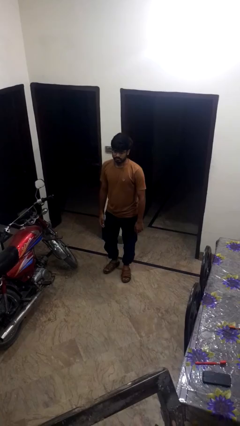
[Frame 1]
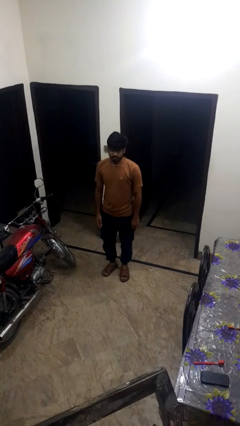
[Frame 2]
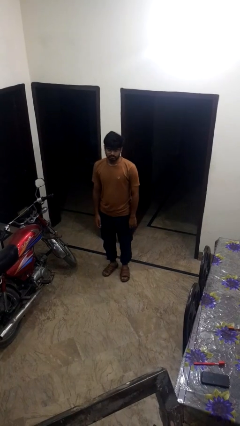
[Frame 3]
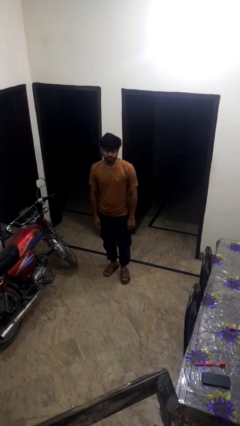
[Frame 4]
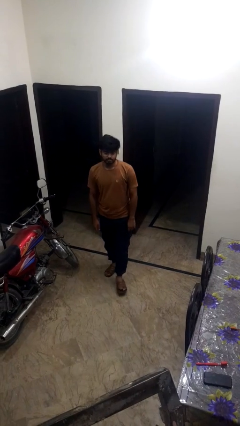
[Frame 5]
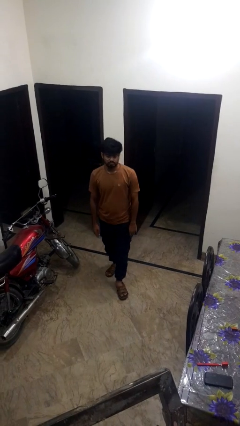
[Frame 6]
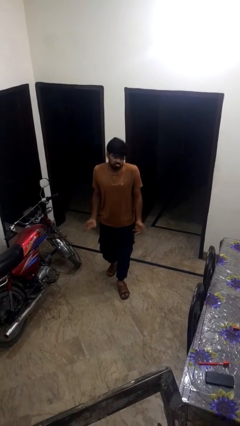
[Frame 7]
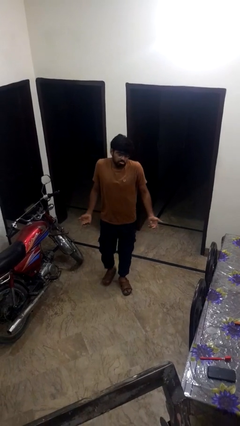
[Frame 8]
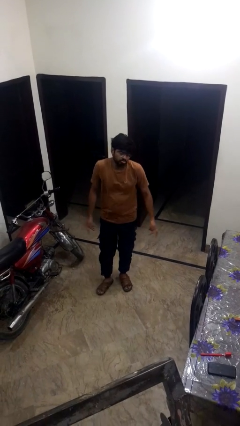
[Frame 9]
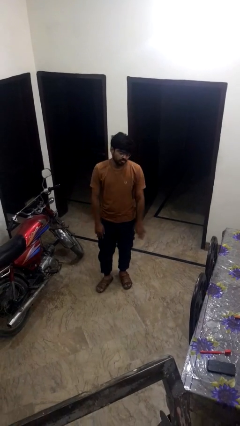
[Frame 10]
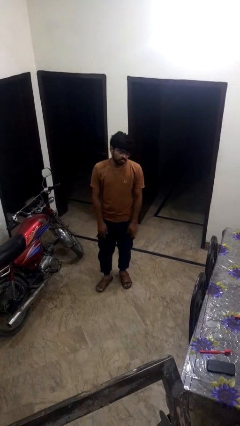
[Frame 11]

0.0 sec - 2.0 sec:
person shrugs

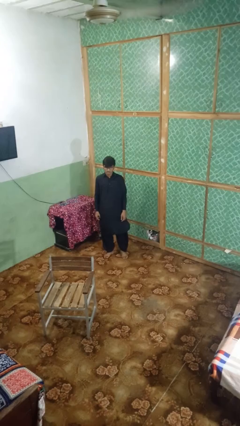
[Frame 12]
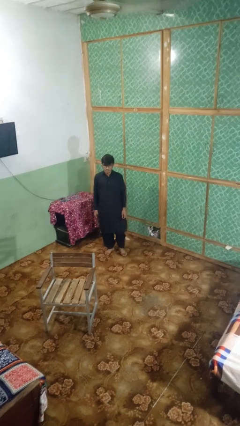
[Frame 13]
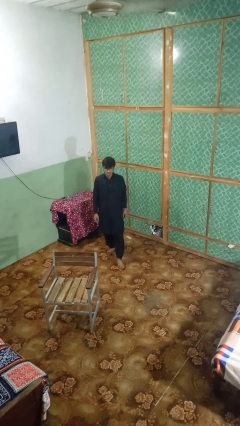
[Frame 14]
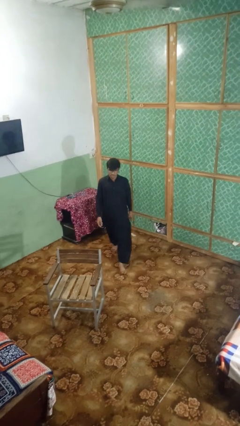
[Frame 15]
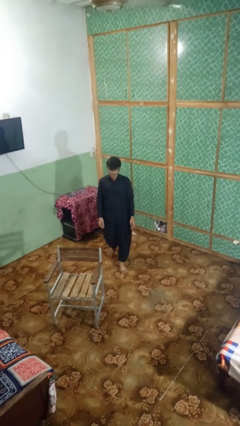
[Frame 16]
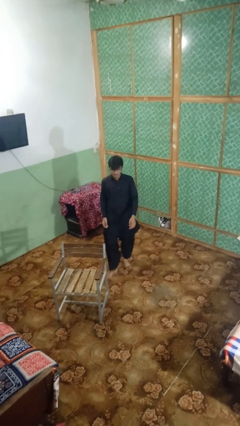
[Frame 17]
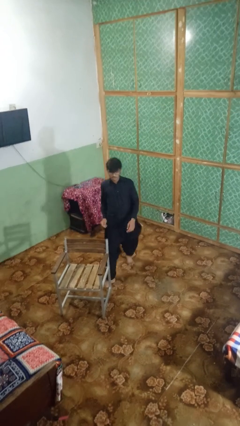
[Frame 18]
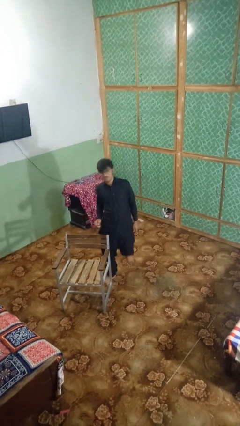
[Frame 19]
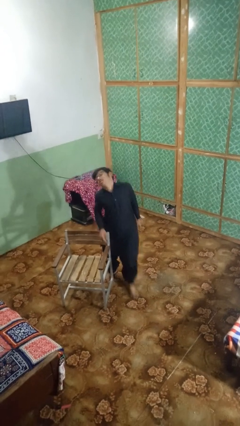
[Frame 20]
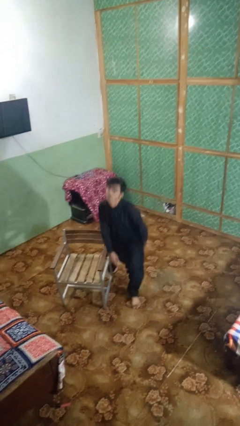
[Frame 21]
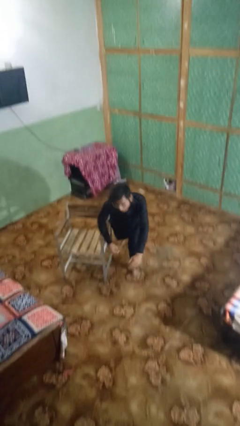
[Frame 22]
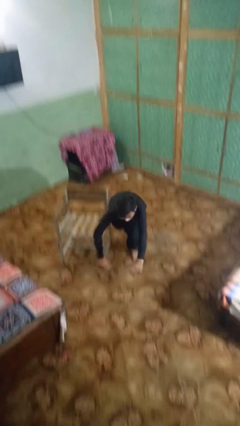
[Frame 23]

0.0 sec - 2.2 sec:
person trips on object on floor

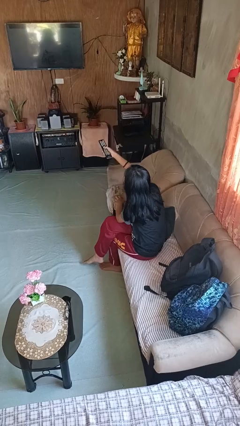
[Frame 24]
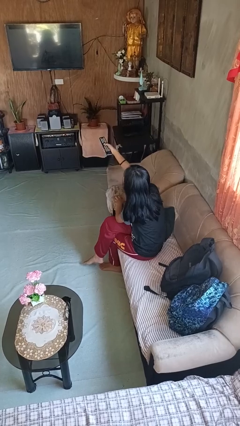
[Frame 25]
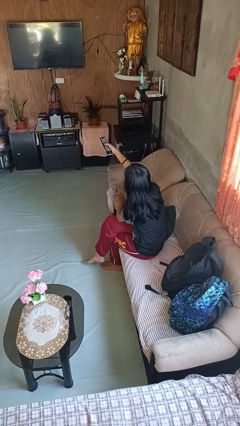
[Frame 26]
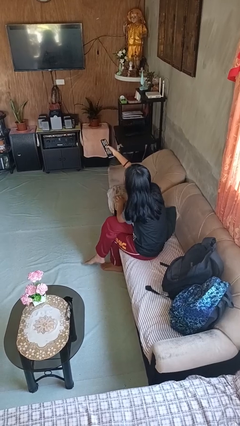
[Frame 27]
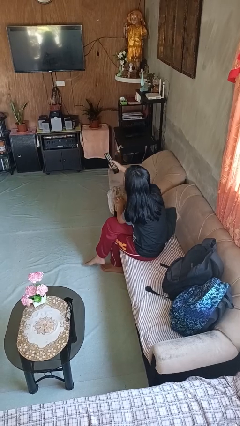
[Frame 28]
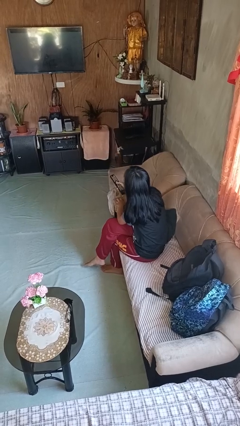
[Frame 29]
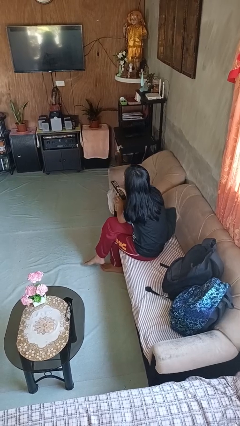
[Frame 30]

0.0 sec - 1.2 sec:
person uses television remote

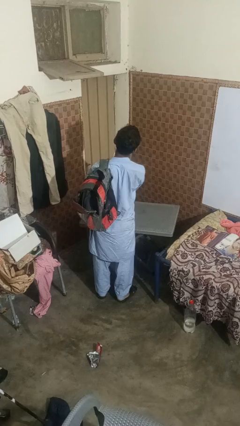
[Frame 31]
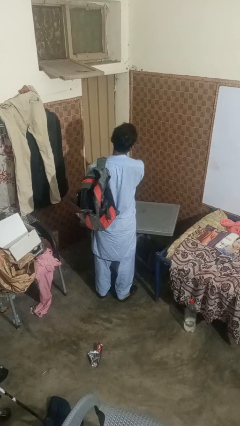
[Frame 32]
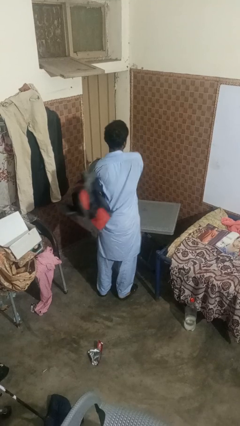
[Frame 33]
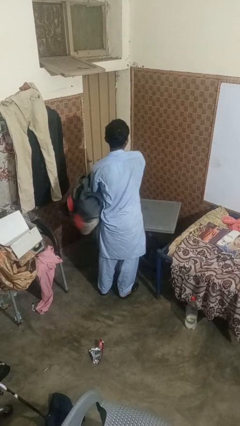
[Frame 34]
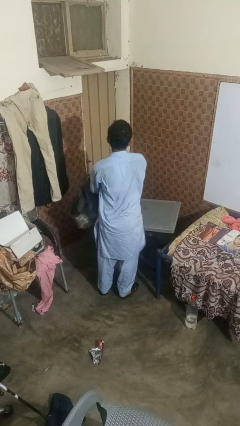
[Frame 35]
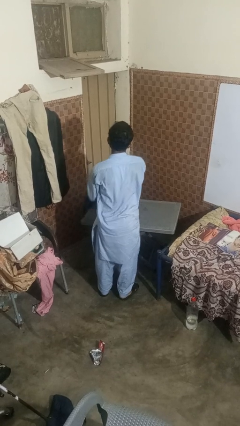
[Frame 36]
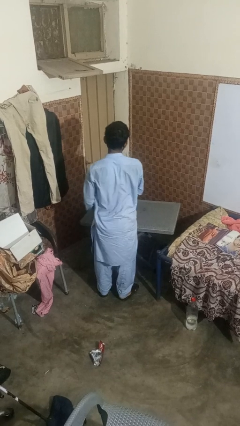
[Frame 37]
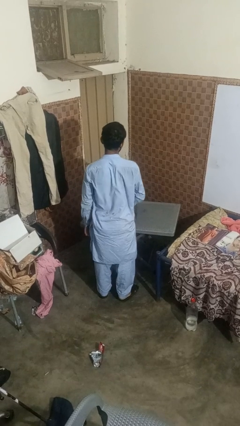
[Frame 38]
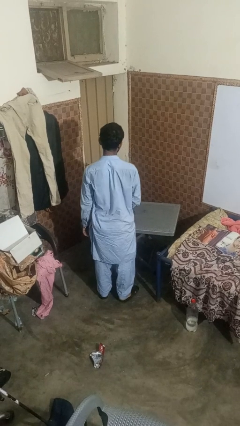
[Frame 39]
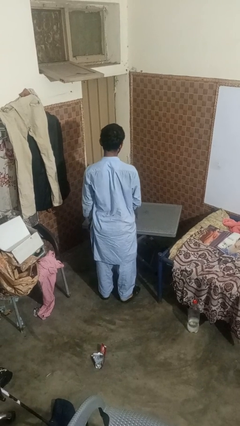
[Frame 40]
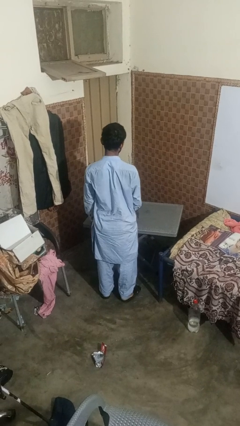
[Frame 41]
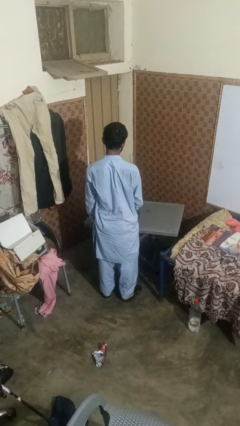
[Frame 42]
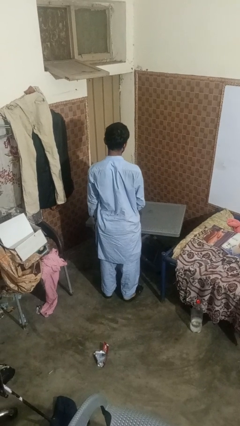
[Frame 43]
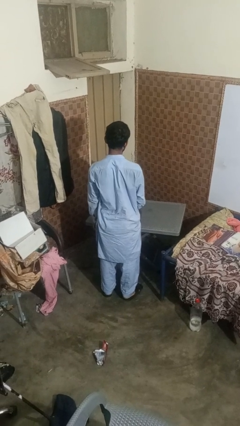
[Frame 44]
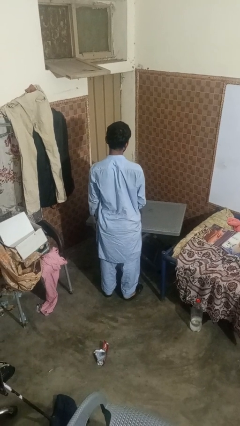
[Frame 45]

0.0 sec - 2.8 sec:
person takes off backpack

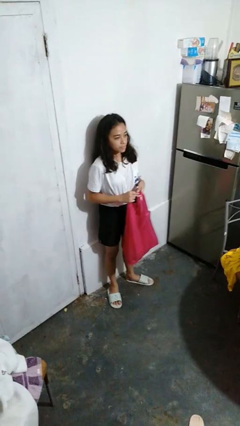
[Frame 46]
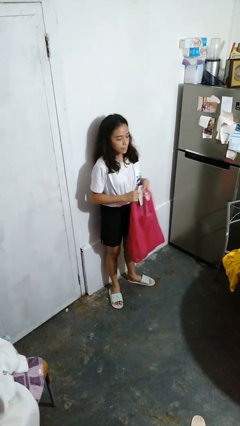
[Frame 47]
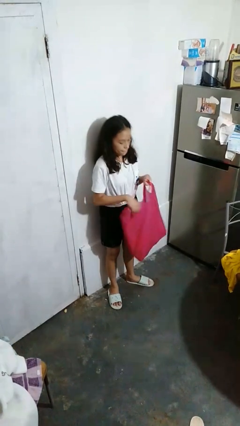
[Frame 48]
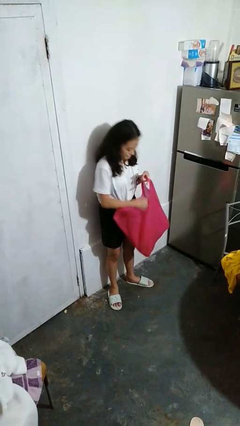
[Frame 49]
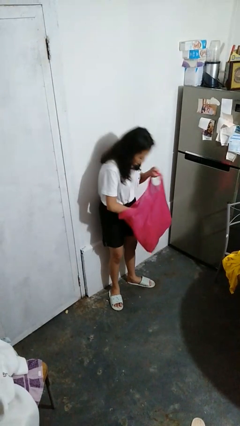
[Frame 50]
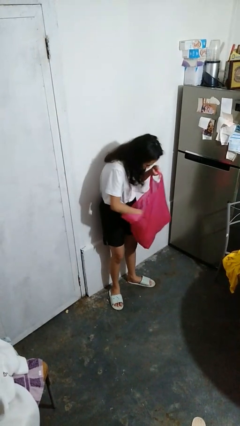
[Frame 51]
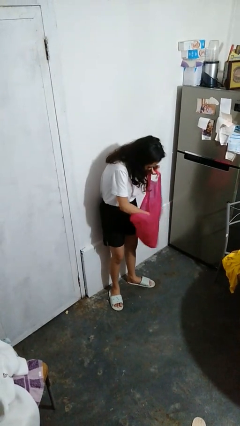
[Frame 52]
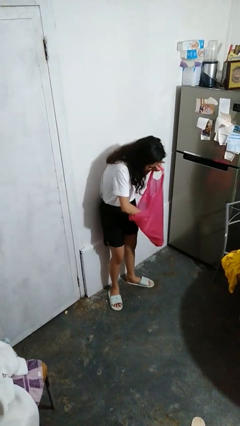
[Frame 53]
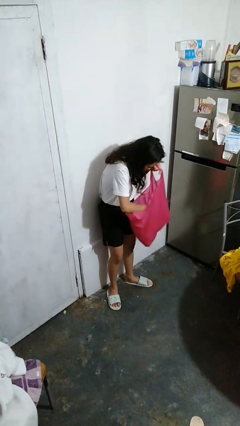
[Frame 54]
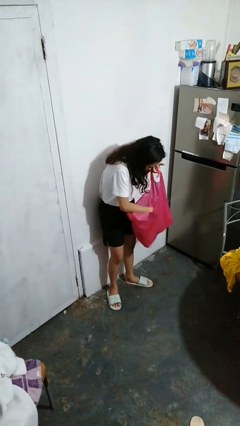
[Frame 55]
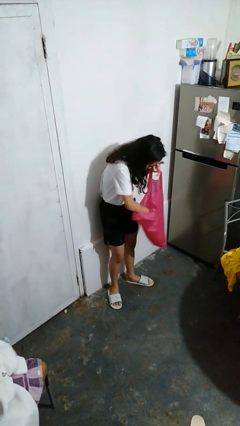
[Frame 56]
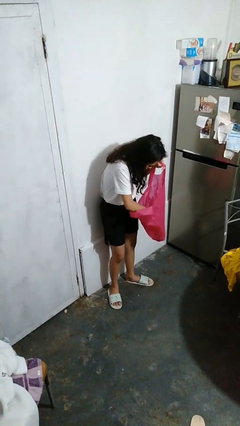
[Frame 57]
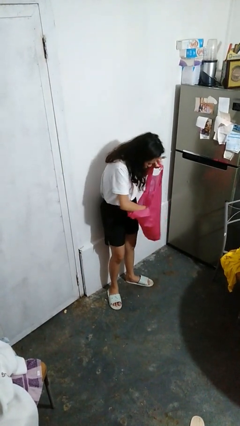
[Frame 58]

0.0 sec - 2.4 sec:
person searches in bag

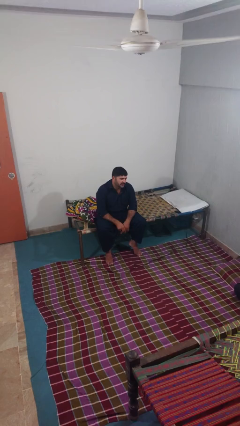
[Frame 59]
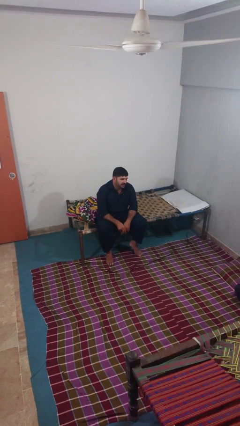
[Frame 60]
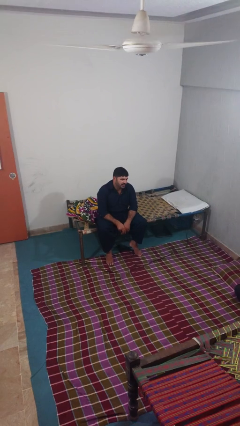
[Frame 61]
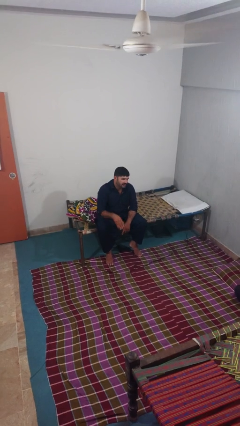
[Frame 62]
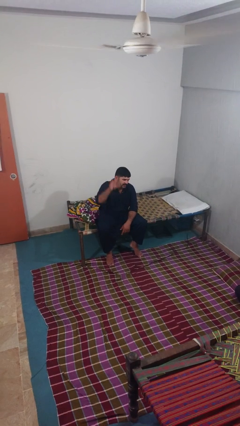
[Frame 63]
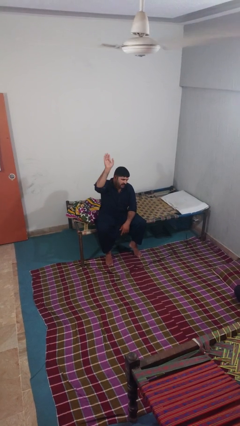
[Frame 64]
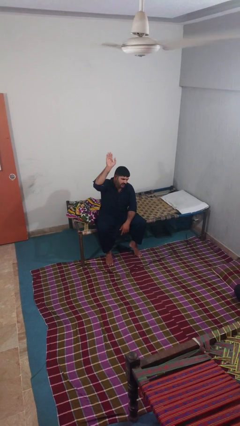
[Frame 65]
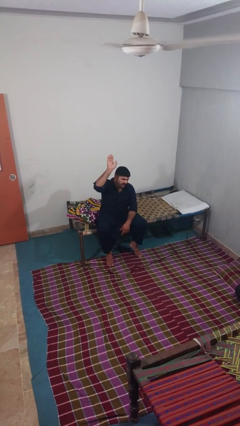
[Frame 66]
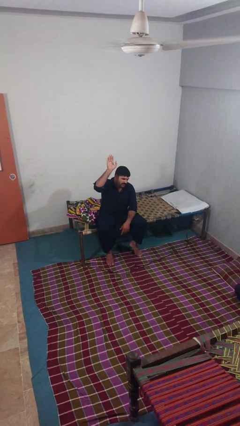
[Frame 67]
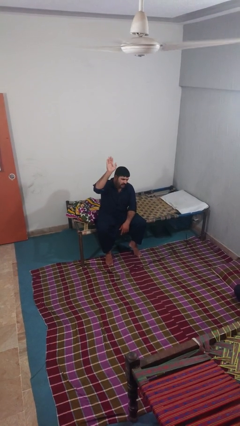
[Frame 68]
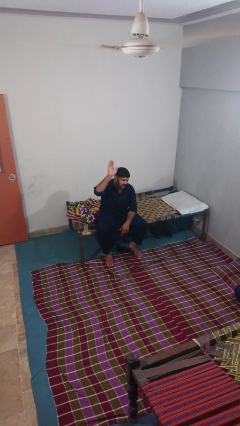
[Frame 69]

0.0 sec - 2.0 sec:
person gestures swipe up

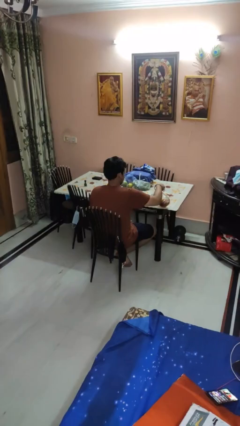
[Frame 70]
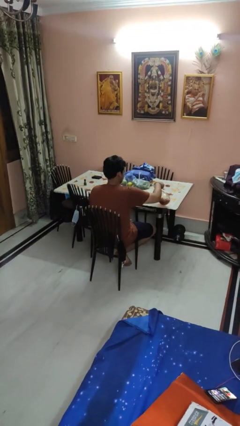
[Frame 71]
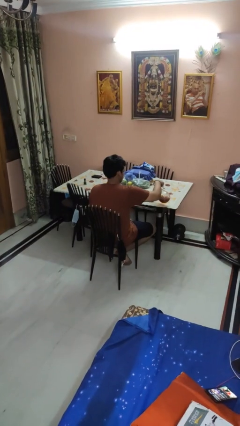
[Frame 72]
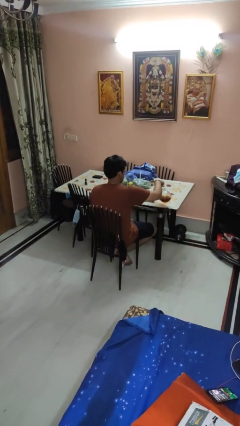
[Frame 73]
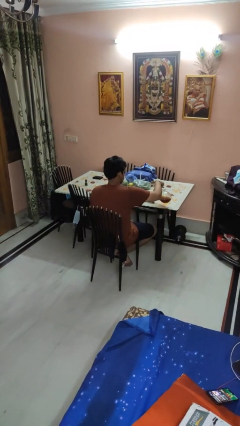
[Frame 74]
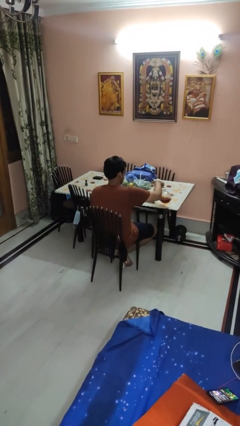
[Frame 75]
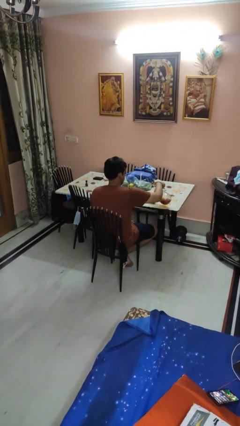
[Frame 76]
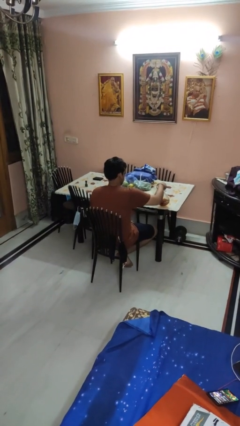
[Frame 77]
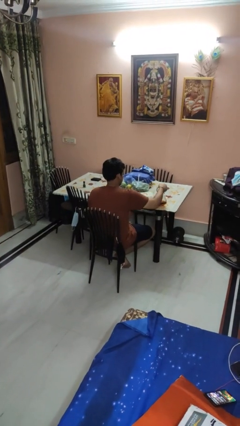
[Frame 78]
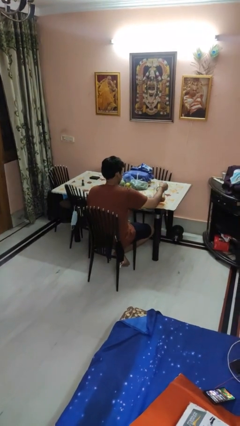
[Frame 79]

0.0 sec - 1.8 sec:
person pours coffee into mug

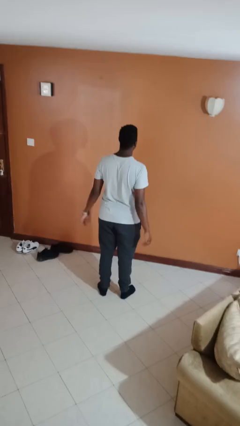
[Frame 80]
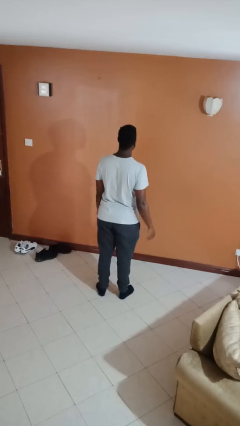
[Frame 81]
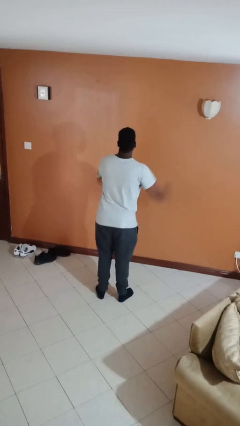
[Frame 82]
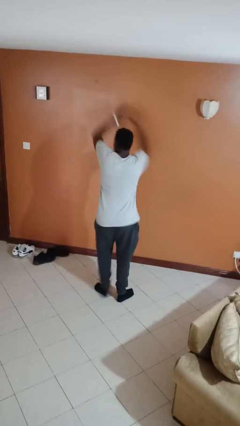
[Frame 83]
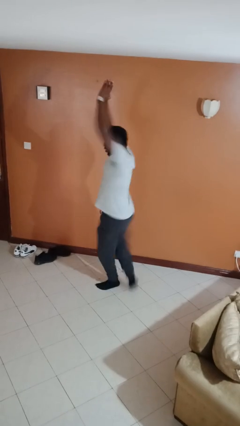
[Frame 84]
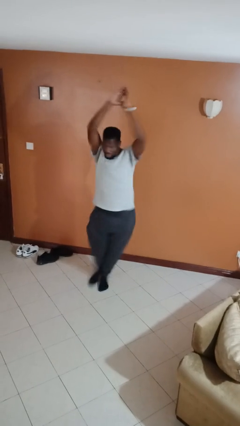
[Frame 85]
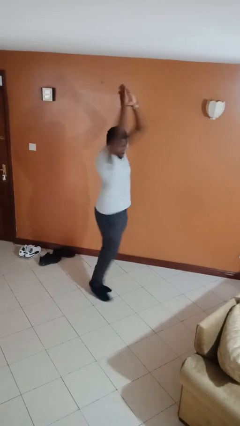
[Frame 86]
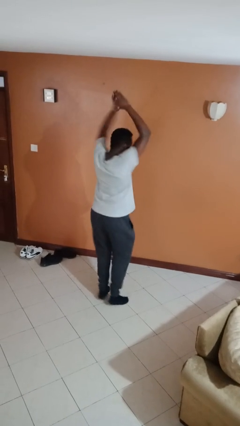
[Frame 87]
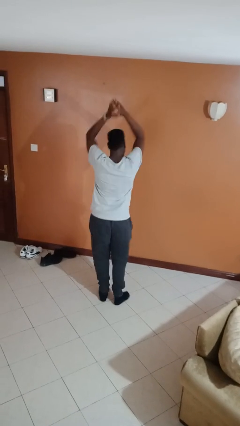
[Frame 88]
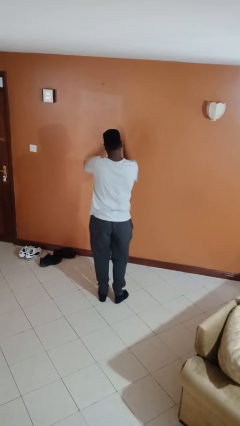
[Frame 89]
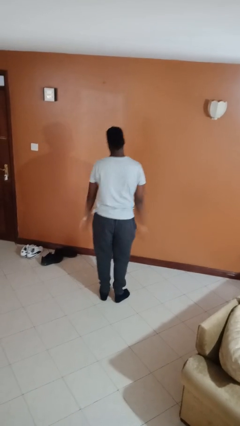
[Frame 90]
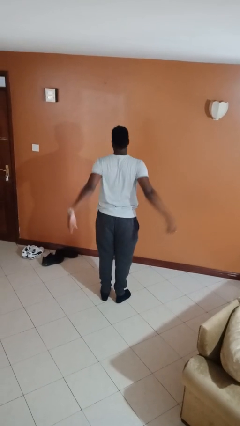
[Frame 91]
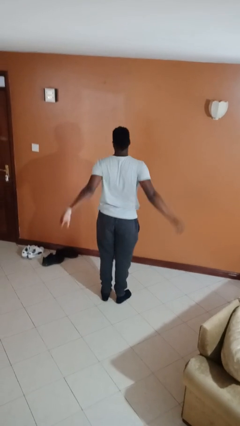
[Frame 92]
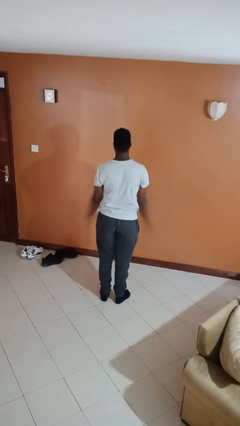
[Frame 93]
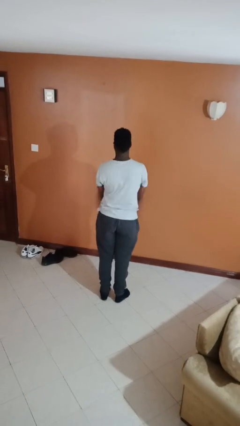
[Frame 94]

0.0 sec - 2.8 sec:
person twirls
